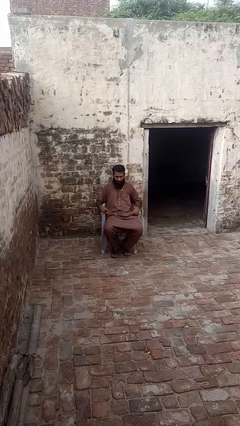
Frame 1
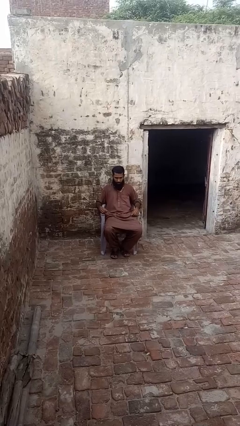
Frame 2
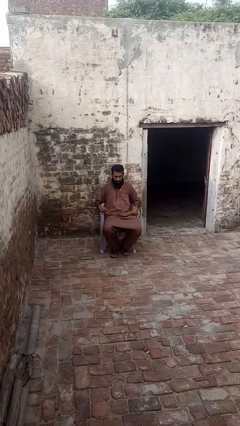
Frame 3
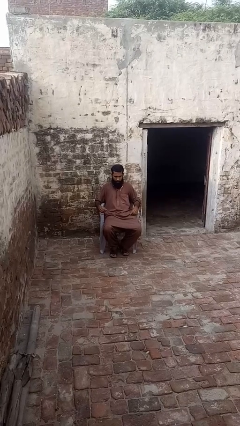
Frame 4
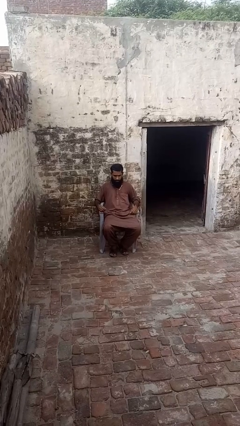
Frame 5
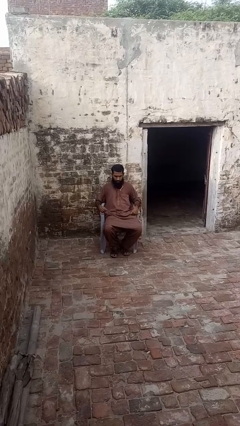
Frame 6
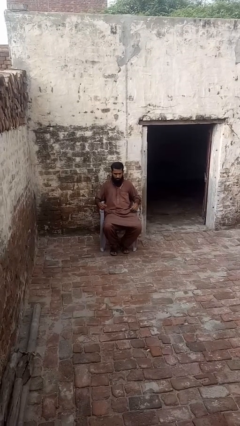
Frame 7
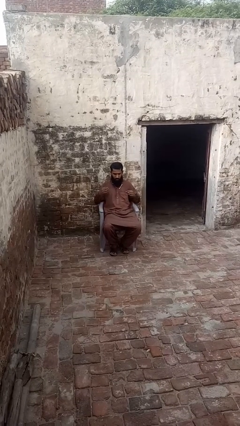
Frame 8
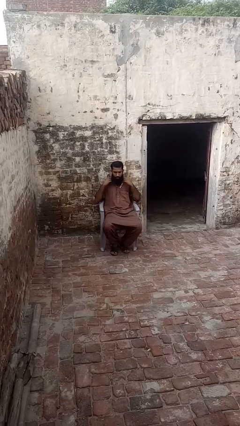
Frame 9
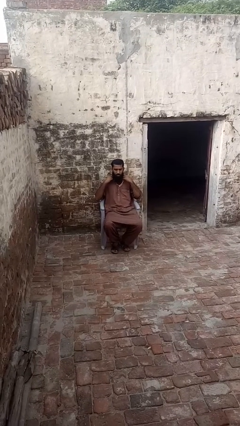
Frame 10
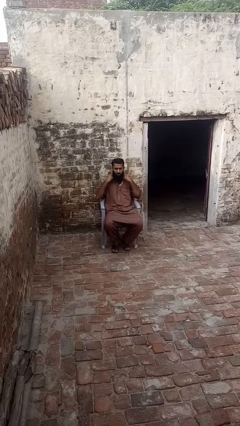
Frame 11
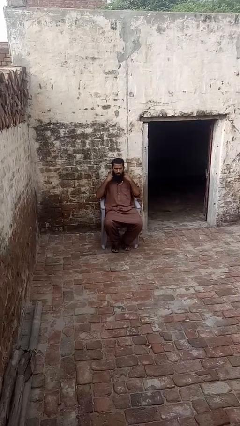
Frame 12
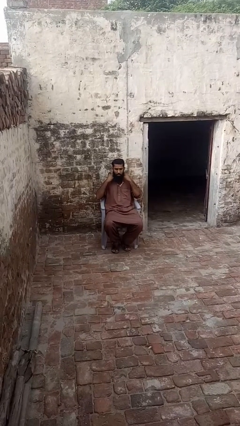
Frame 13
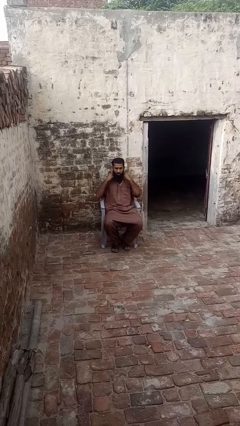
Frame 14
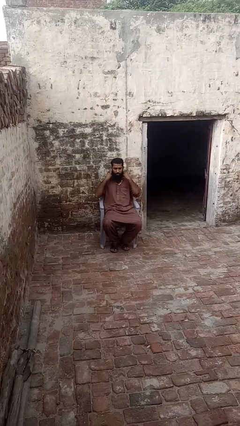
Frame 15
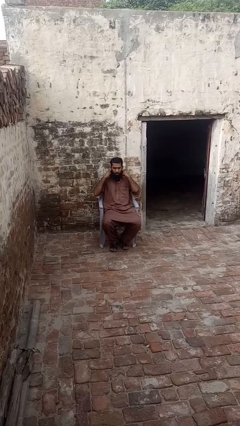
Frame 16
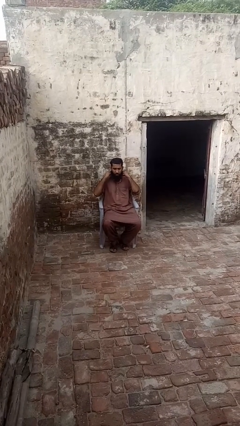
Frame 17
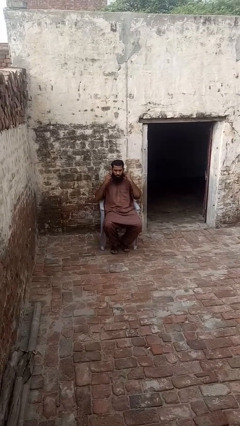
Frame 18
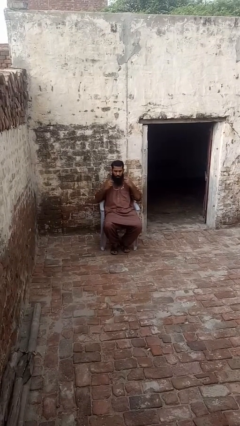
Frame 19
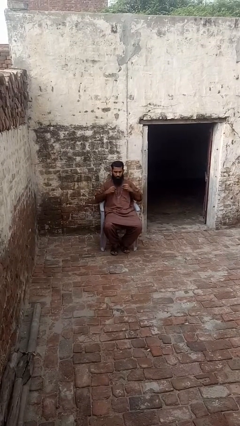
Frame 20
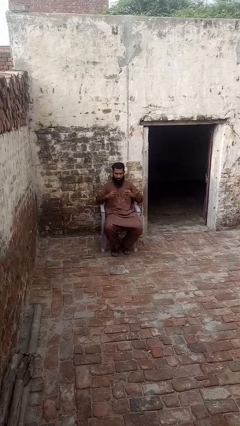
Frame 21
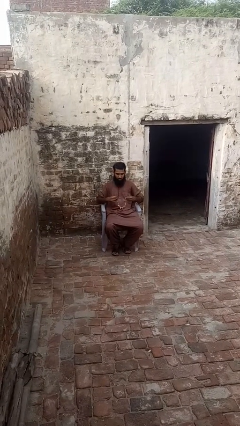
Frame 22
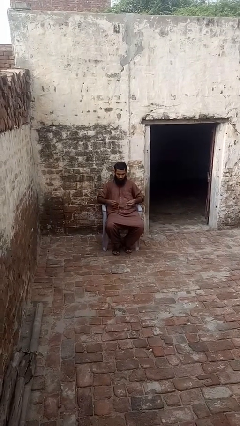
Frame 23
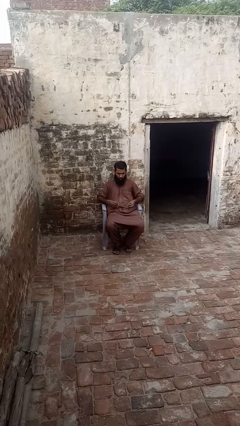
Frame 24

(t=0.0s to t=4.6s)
person takes off necklace

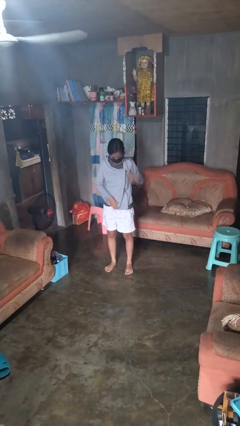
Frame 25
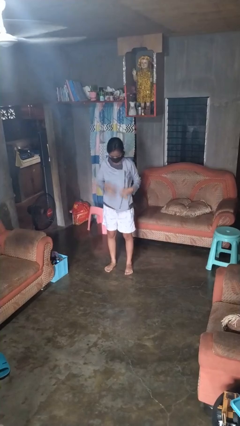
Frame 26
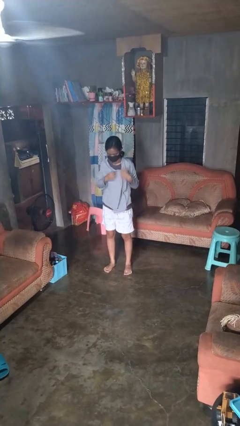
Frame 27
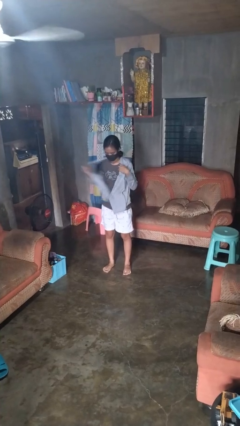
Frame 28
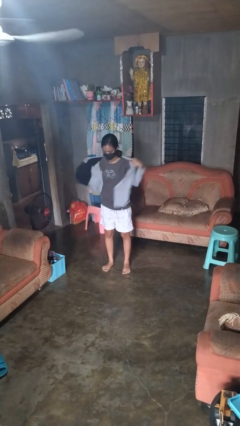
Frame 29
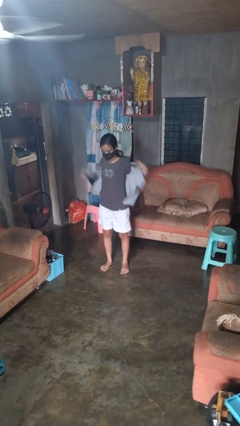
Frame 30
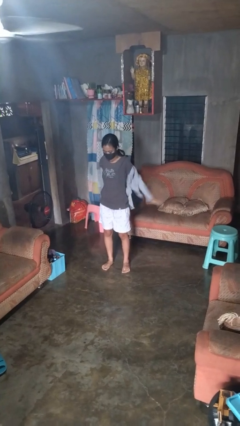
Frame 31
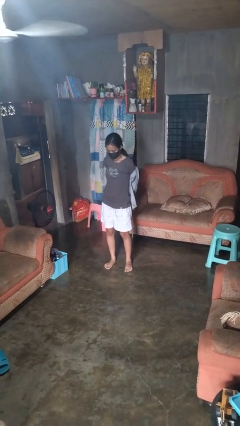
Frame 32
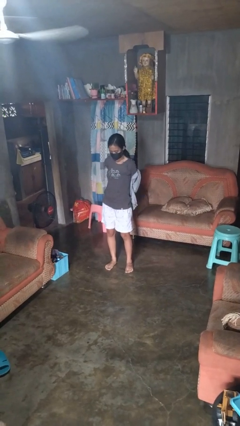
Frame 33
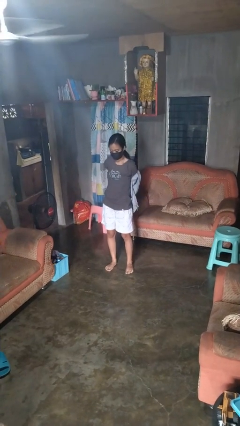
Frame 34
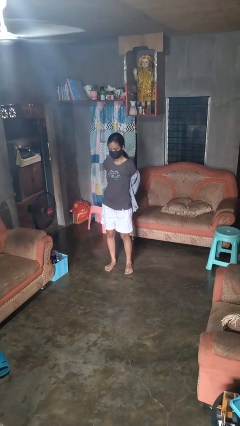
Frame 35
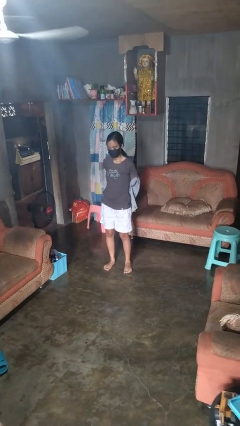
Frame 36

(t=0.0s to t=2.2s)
person takes off jacket

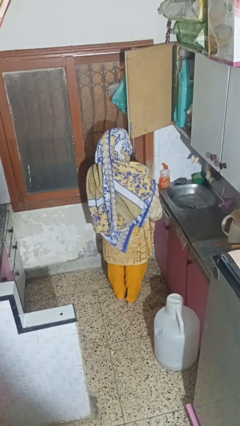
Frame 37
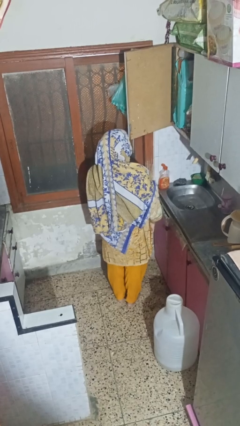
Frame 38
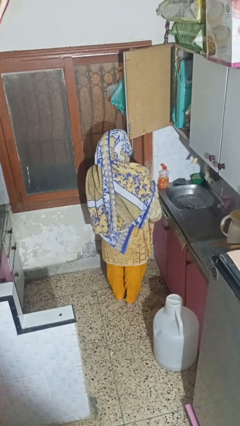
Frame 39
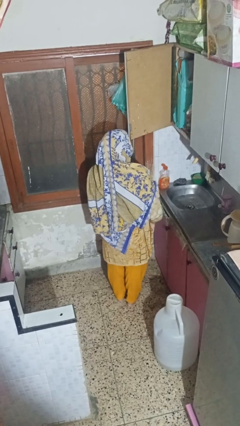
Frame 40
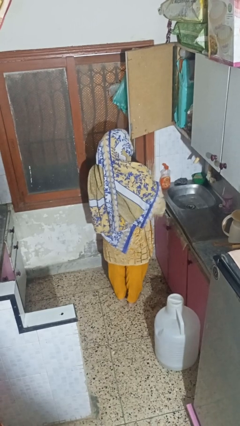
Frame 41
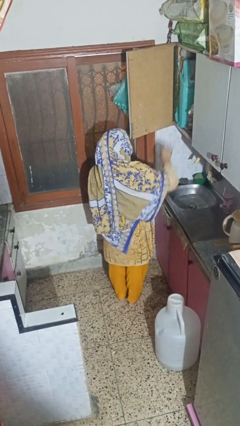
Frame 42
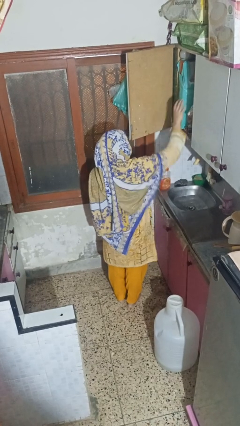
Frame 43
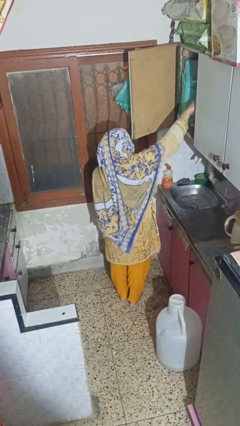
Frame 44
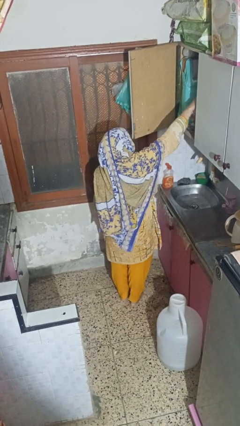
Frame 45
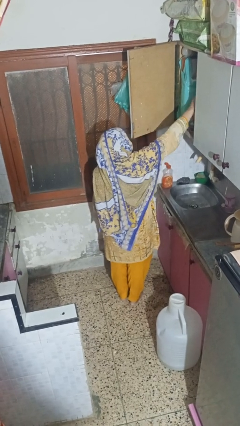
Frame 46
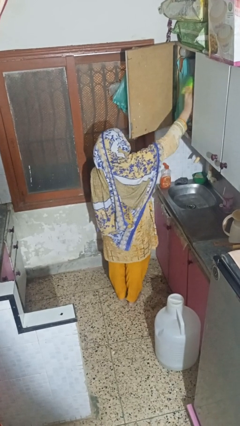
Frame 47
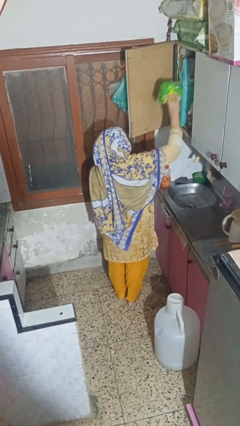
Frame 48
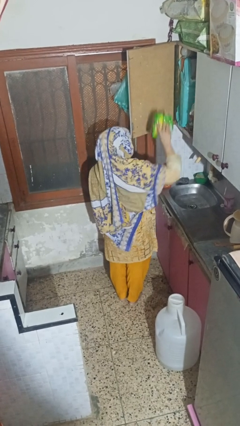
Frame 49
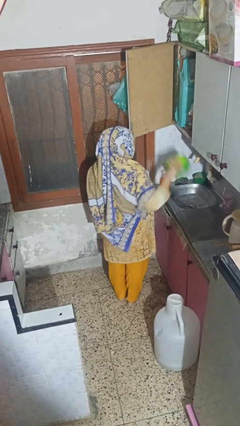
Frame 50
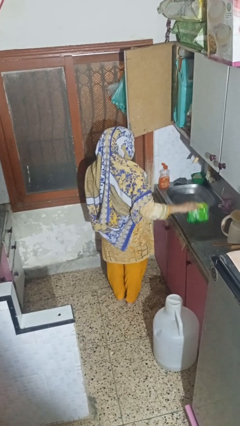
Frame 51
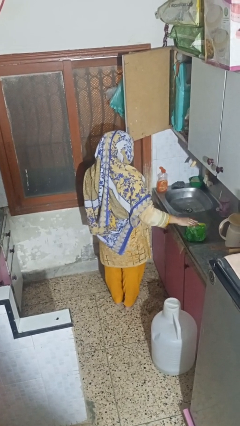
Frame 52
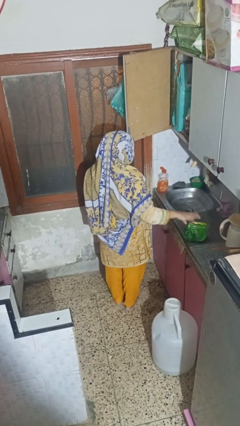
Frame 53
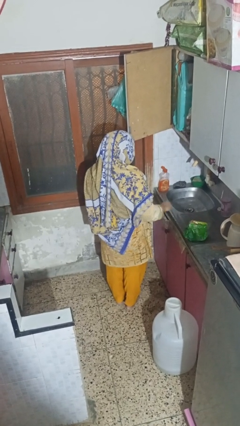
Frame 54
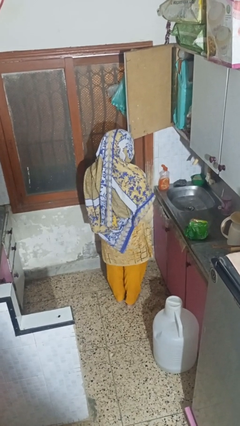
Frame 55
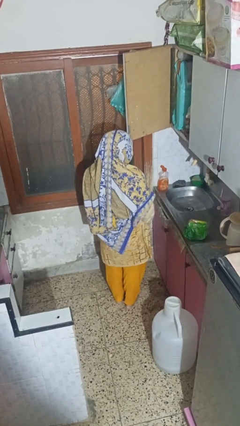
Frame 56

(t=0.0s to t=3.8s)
person takes object from cabinet

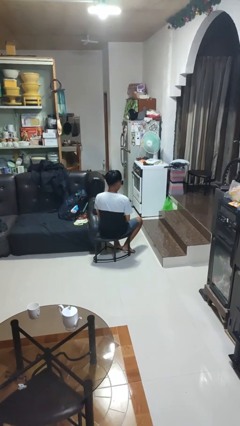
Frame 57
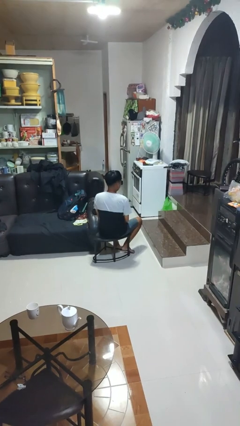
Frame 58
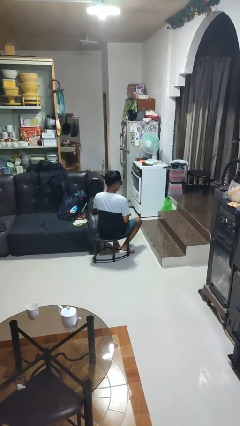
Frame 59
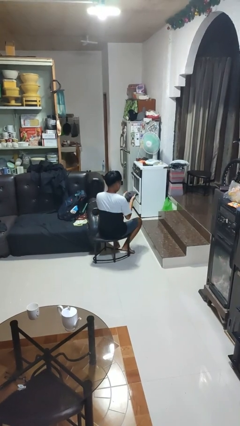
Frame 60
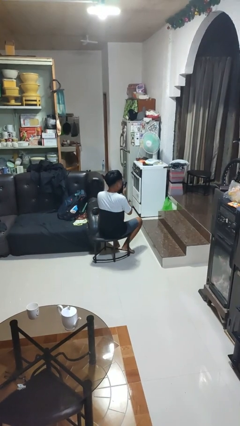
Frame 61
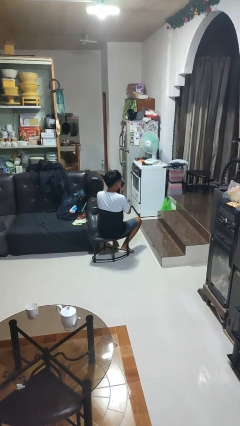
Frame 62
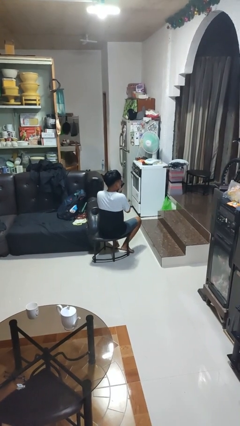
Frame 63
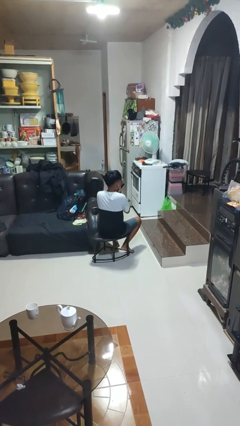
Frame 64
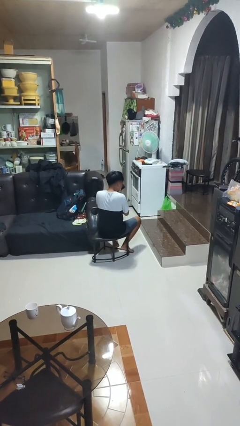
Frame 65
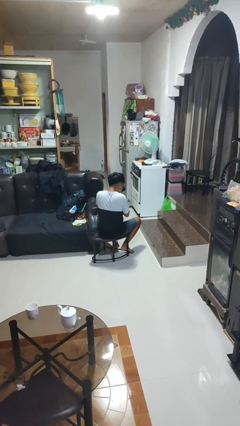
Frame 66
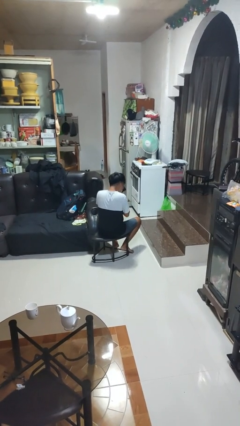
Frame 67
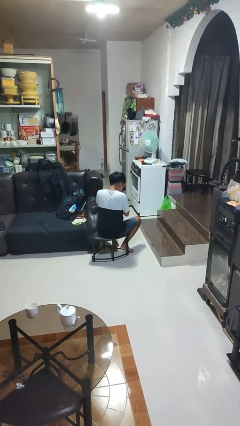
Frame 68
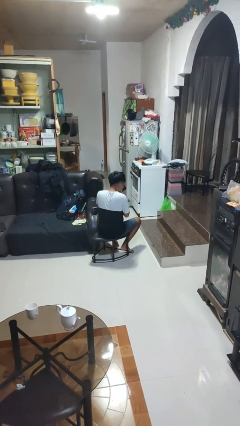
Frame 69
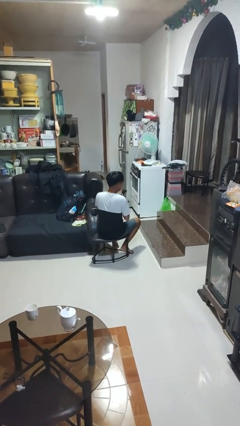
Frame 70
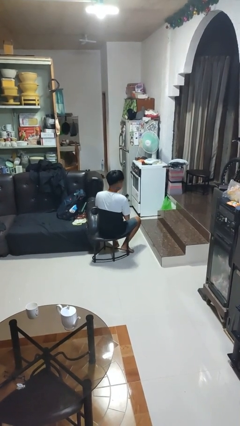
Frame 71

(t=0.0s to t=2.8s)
person blows nose

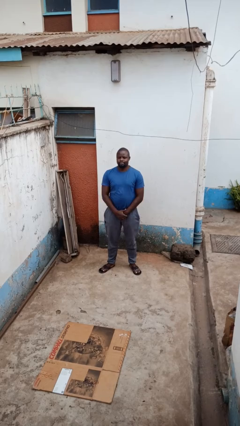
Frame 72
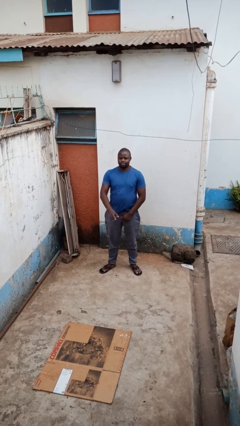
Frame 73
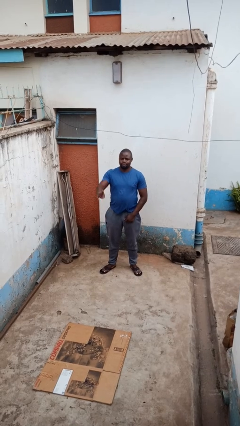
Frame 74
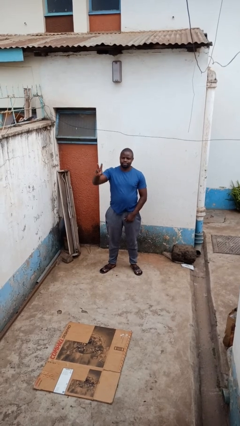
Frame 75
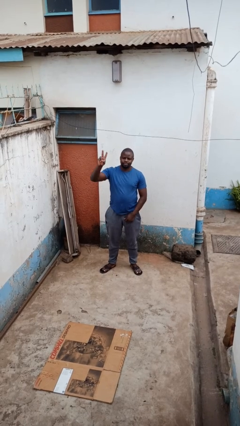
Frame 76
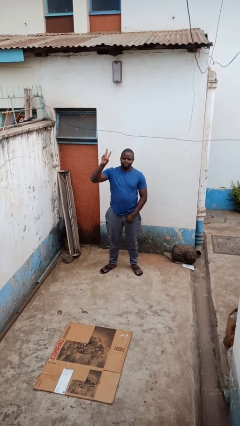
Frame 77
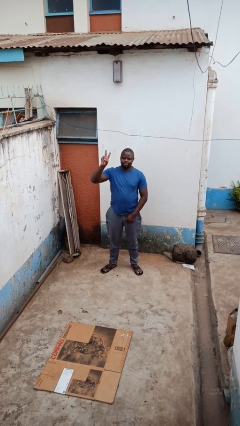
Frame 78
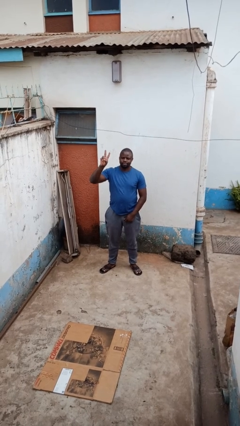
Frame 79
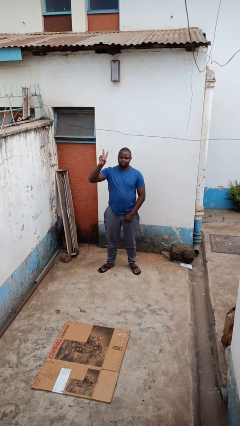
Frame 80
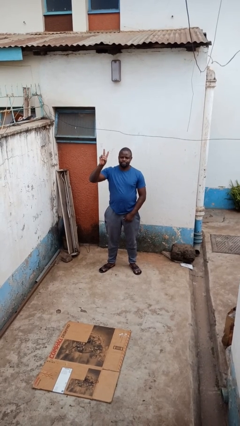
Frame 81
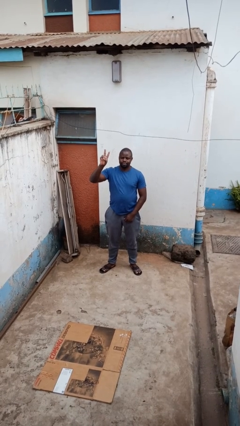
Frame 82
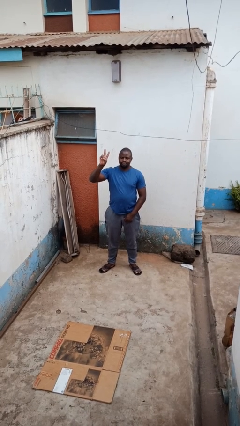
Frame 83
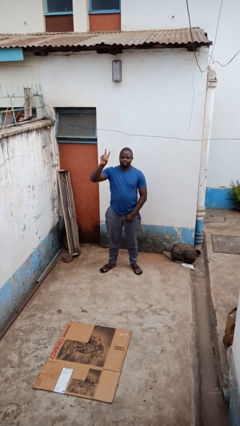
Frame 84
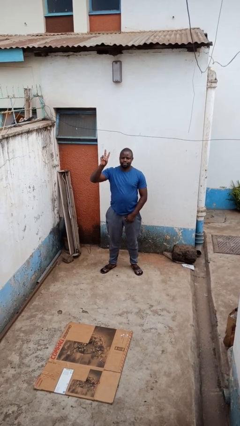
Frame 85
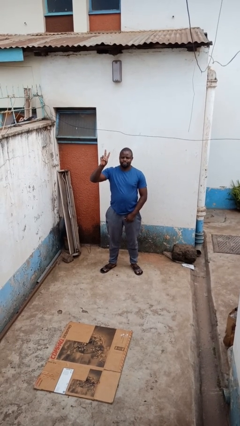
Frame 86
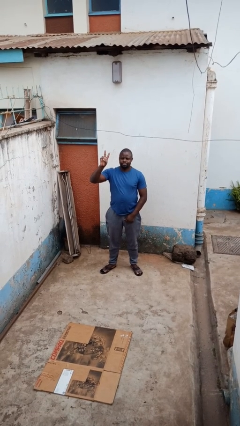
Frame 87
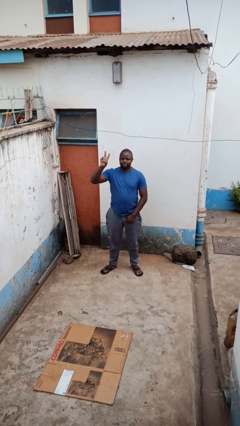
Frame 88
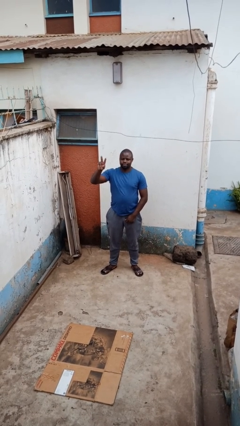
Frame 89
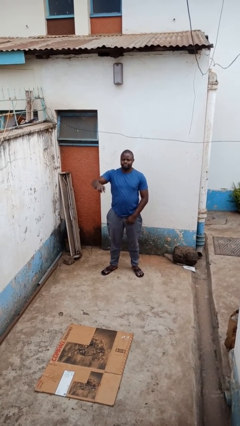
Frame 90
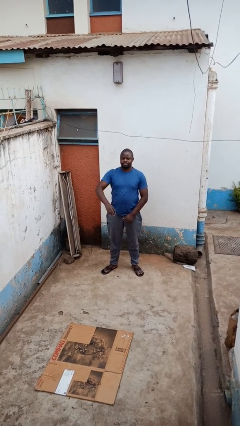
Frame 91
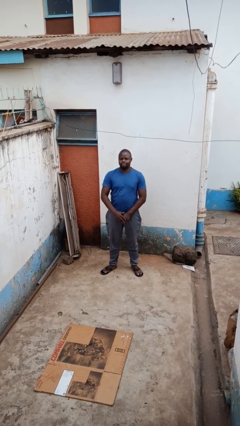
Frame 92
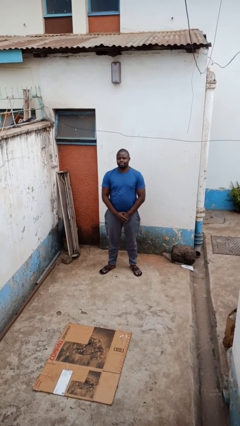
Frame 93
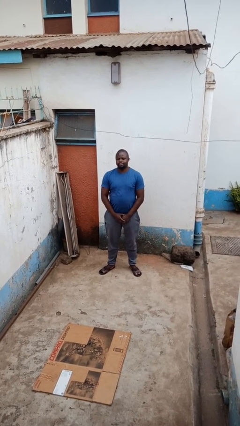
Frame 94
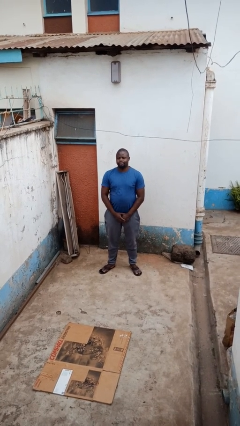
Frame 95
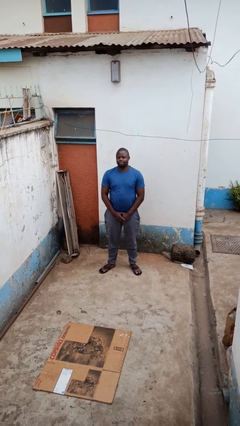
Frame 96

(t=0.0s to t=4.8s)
person gestures peace
